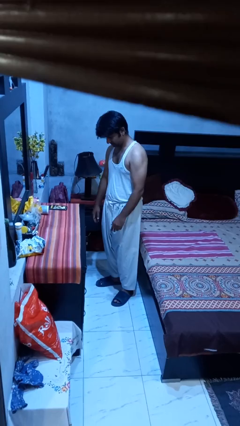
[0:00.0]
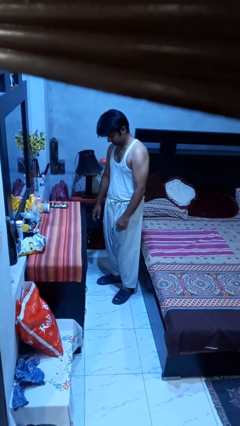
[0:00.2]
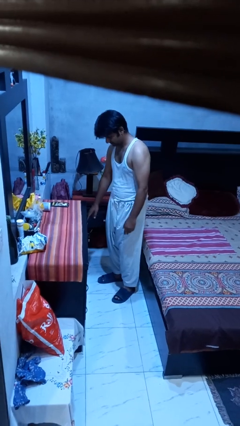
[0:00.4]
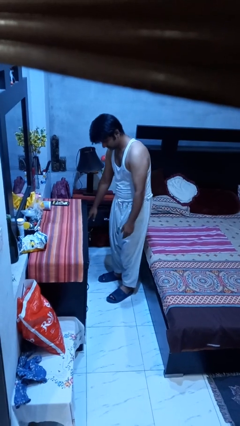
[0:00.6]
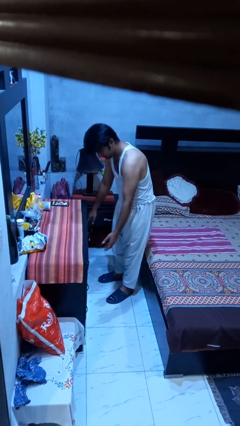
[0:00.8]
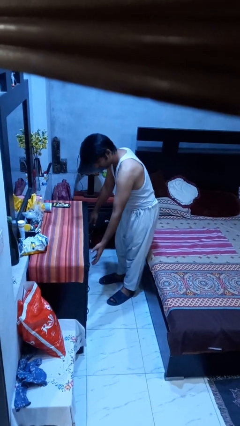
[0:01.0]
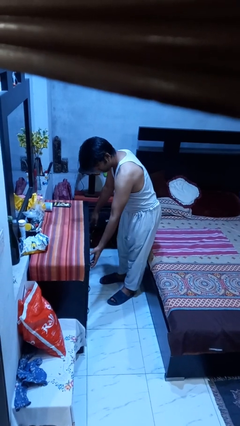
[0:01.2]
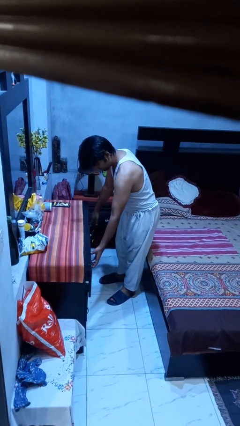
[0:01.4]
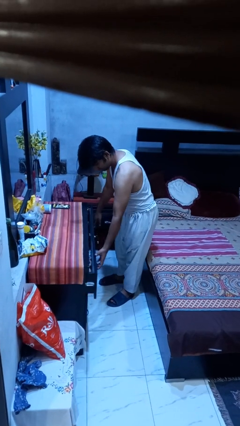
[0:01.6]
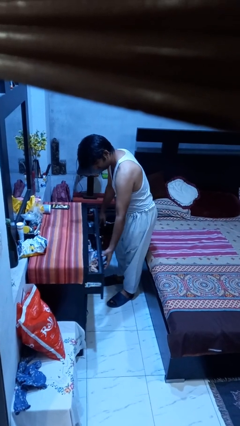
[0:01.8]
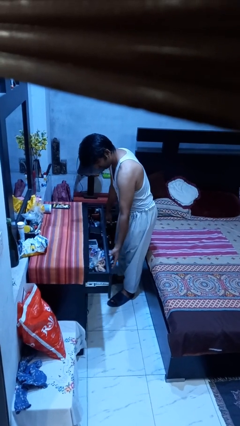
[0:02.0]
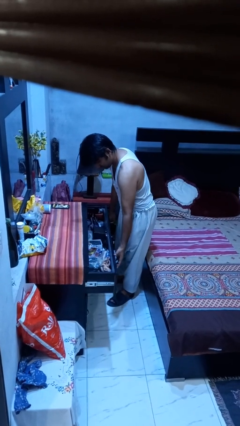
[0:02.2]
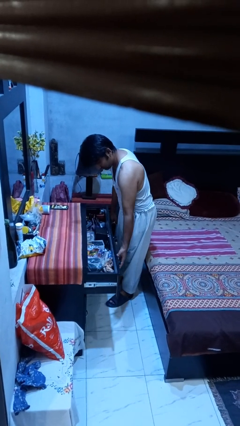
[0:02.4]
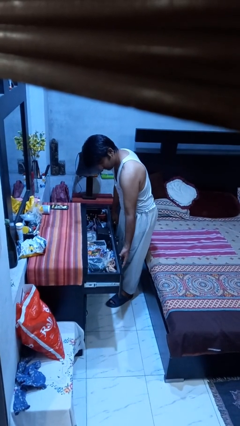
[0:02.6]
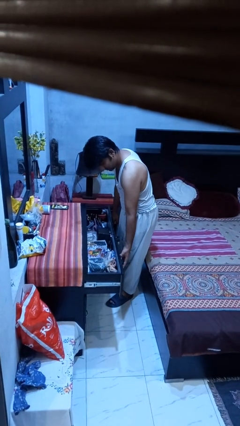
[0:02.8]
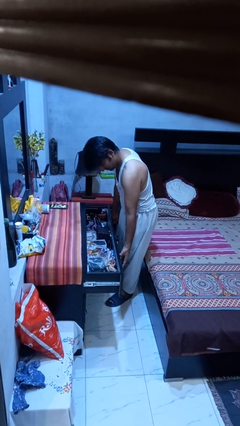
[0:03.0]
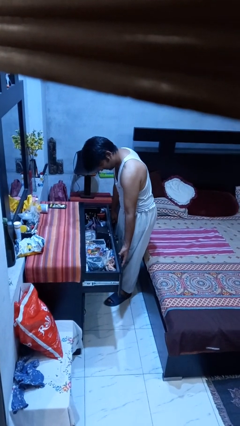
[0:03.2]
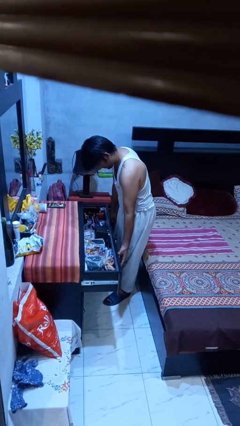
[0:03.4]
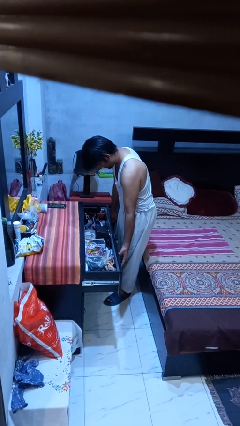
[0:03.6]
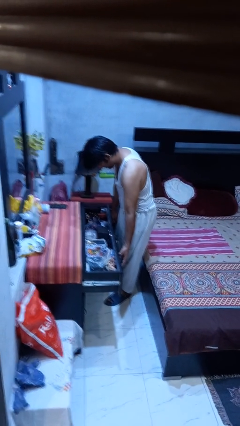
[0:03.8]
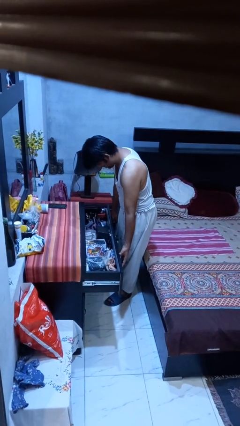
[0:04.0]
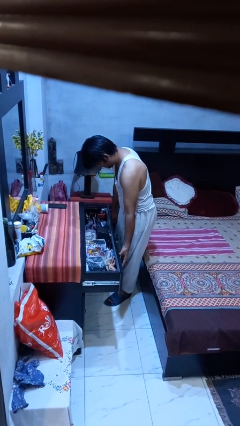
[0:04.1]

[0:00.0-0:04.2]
person opens dresser drawer

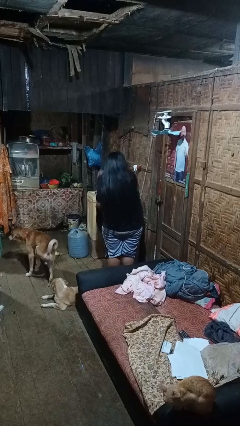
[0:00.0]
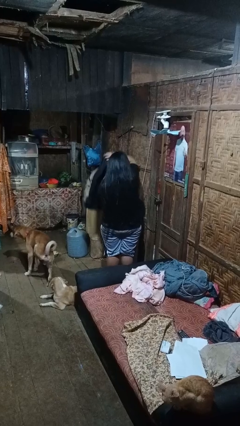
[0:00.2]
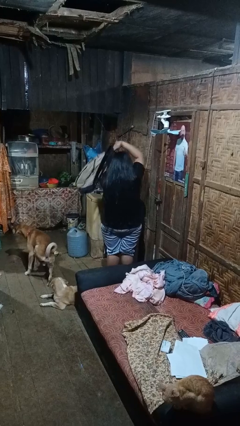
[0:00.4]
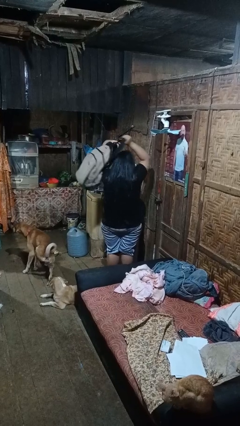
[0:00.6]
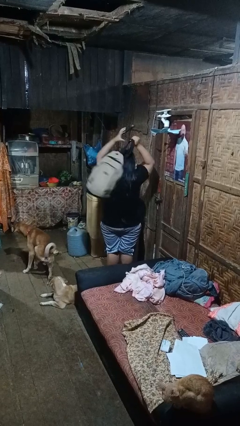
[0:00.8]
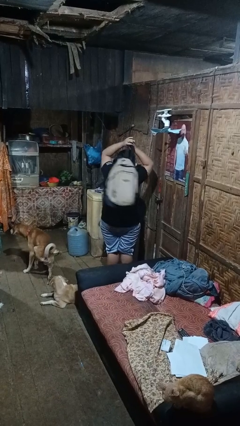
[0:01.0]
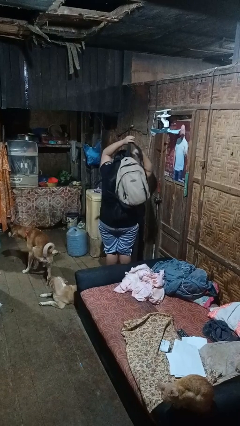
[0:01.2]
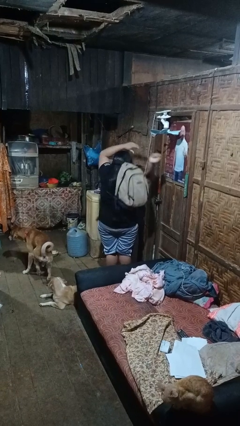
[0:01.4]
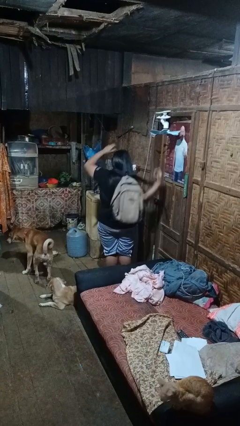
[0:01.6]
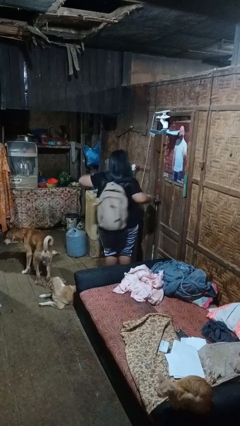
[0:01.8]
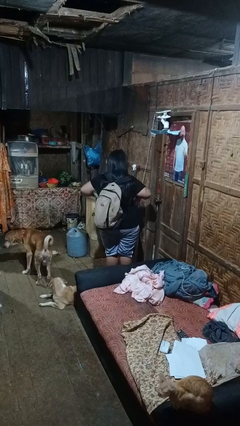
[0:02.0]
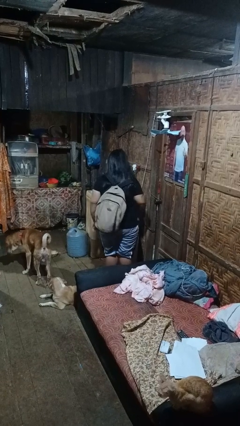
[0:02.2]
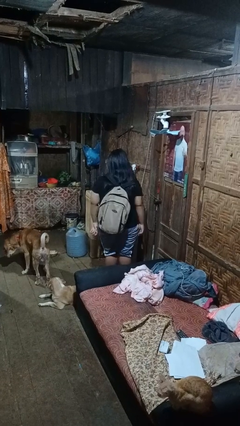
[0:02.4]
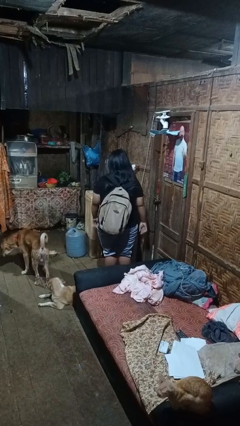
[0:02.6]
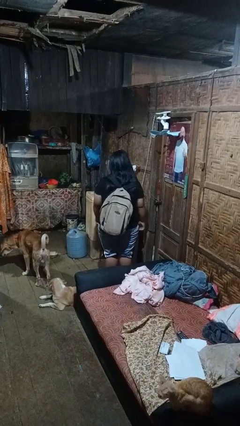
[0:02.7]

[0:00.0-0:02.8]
person puts on backpack

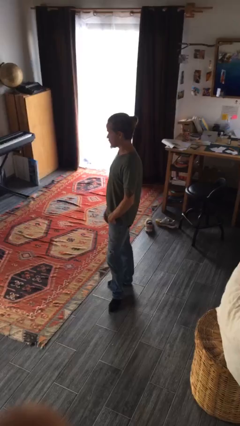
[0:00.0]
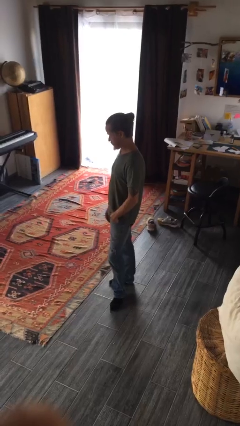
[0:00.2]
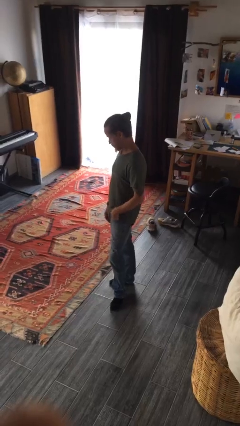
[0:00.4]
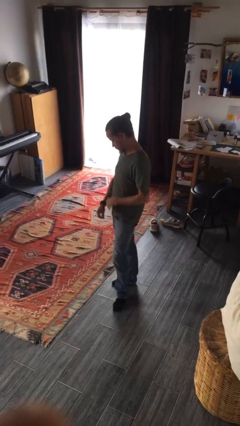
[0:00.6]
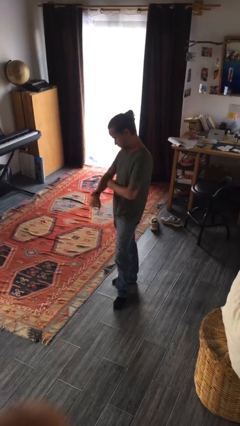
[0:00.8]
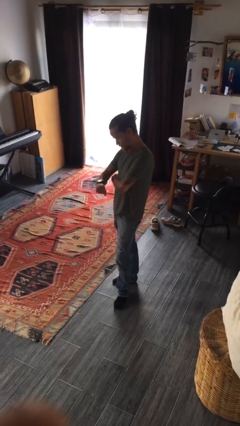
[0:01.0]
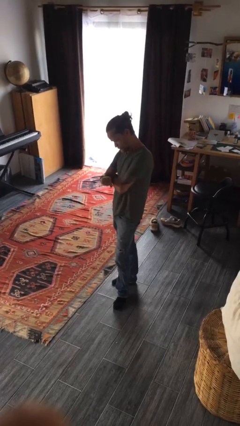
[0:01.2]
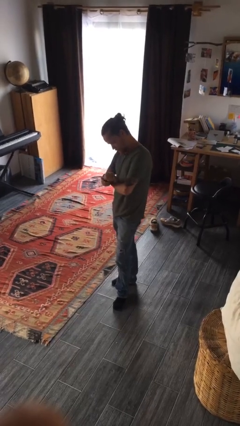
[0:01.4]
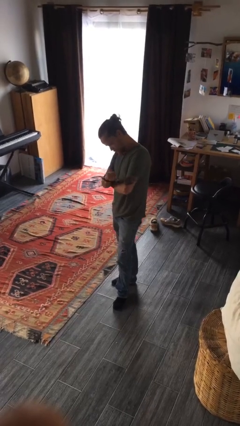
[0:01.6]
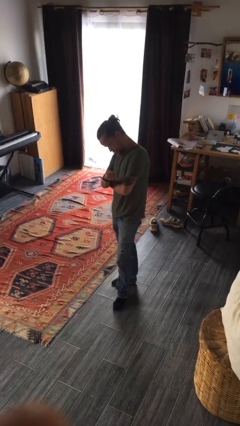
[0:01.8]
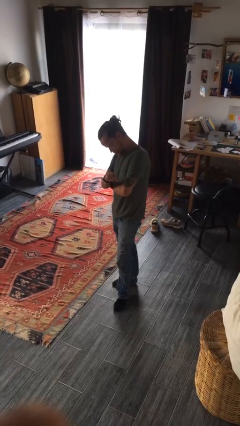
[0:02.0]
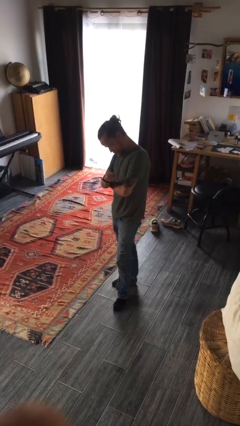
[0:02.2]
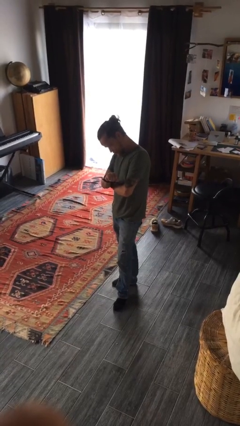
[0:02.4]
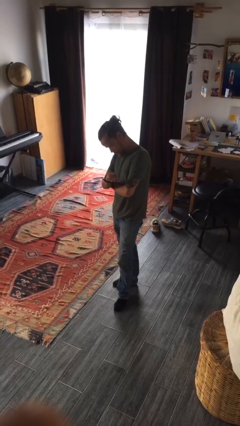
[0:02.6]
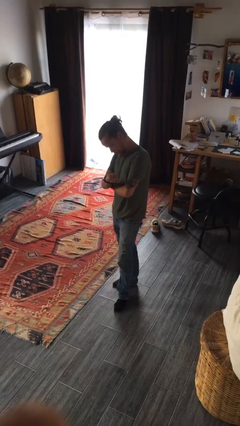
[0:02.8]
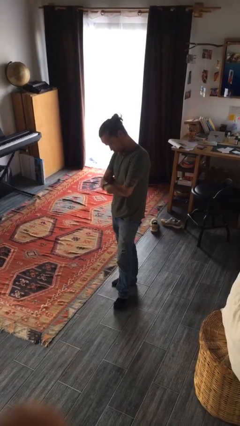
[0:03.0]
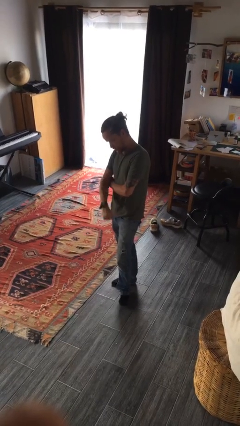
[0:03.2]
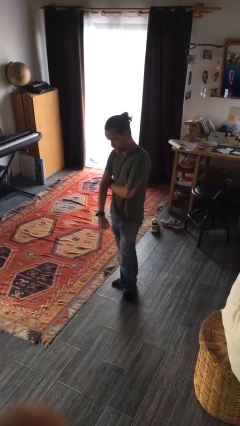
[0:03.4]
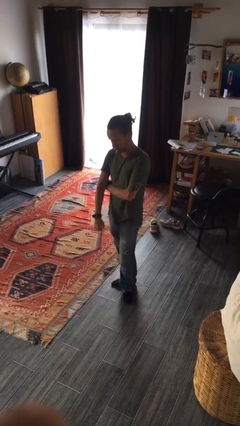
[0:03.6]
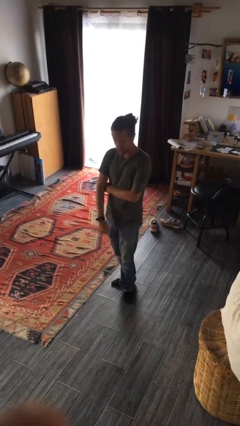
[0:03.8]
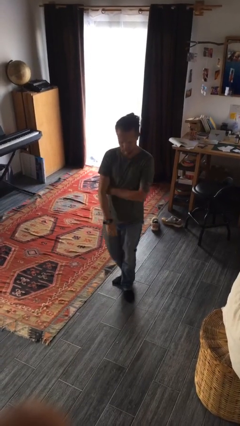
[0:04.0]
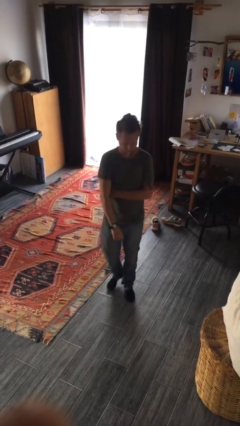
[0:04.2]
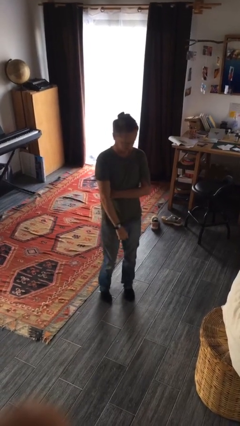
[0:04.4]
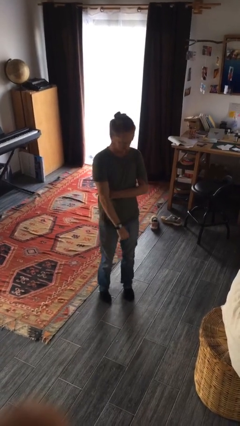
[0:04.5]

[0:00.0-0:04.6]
person looks at wristwatch

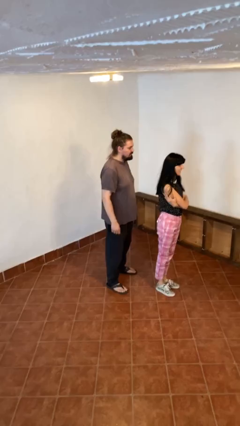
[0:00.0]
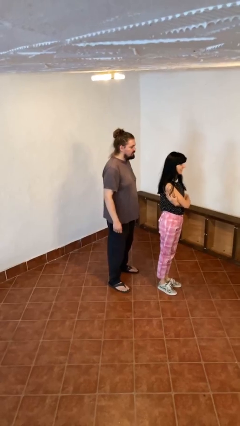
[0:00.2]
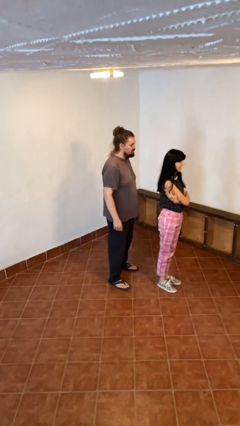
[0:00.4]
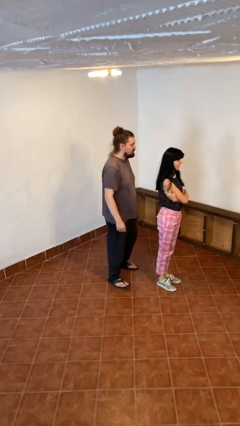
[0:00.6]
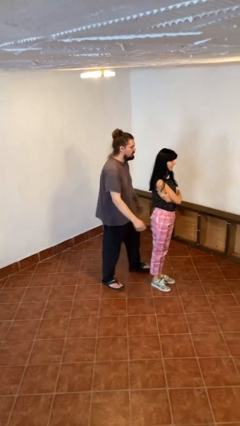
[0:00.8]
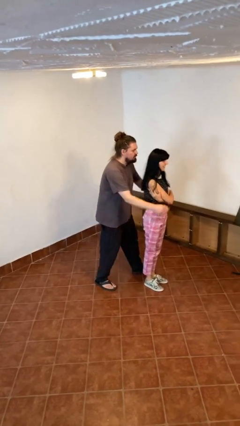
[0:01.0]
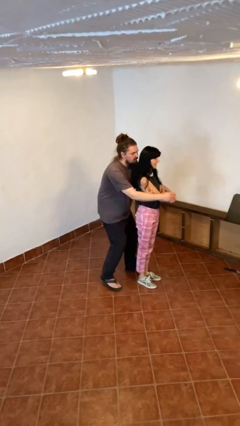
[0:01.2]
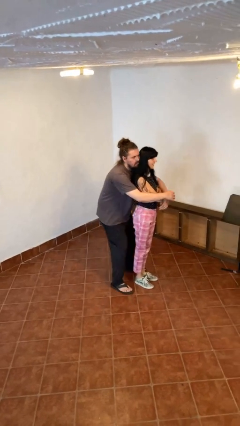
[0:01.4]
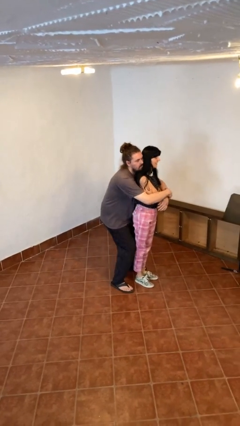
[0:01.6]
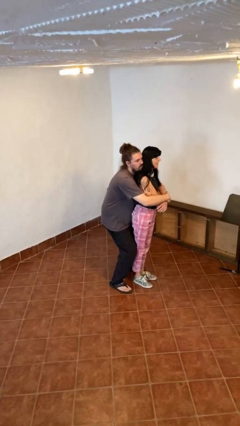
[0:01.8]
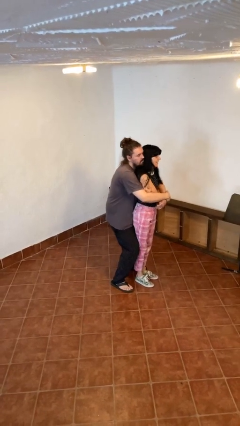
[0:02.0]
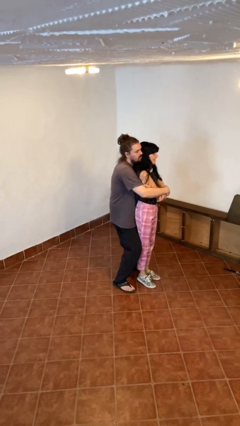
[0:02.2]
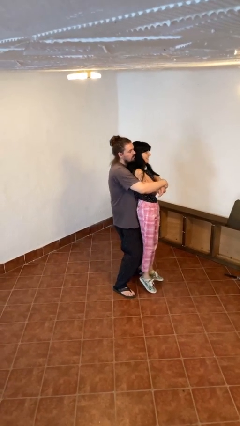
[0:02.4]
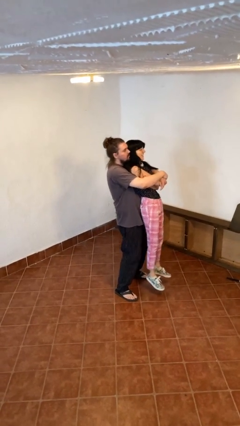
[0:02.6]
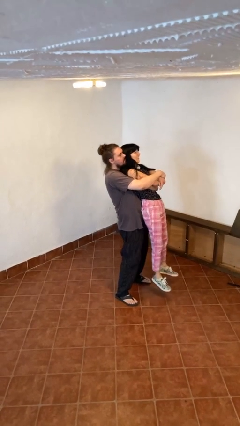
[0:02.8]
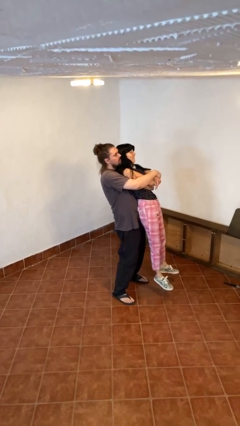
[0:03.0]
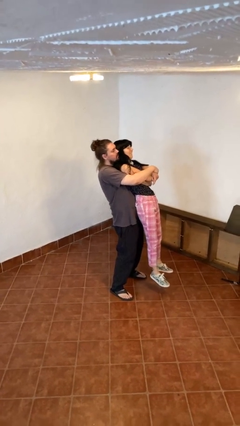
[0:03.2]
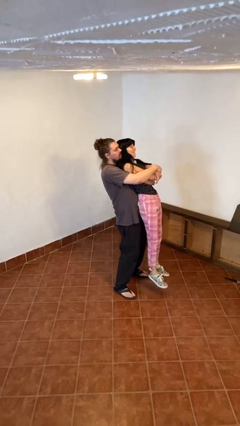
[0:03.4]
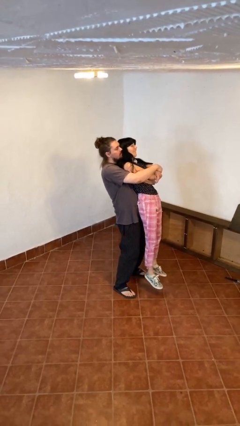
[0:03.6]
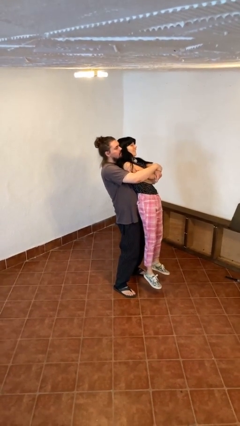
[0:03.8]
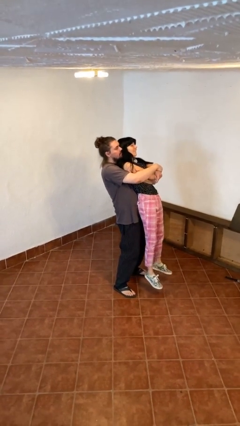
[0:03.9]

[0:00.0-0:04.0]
person picks up person

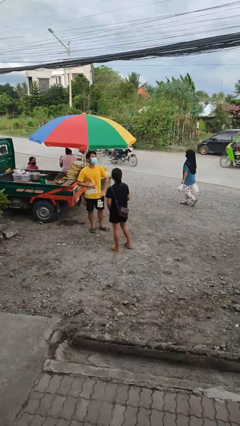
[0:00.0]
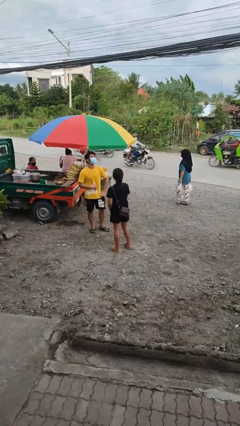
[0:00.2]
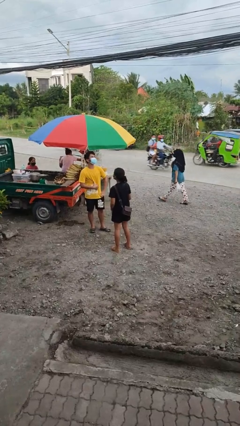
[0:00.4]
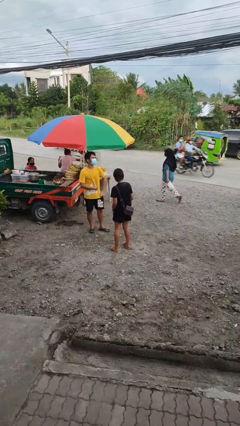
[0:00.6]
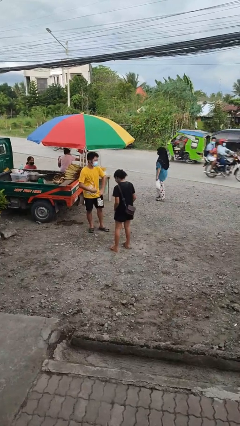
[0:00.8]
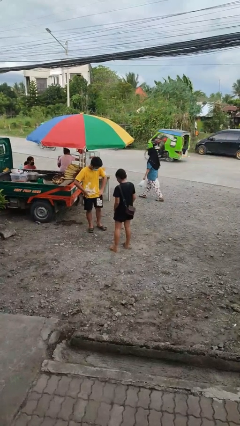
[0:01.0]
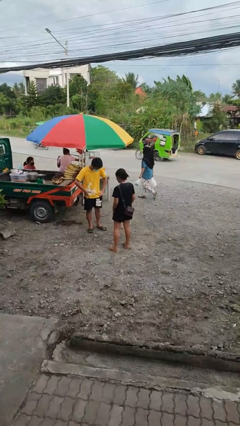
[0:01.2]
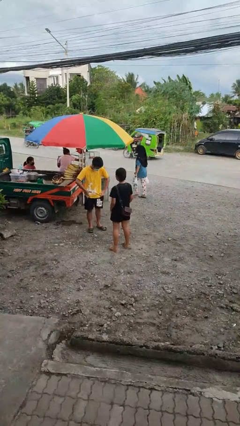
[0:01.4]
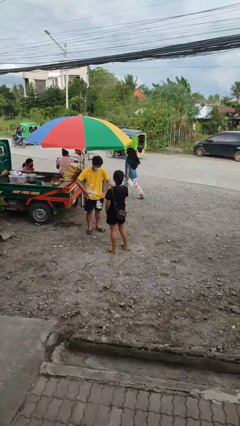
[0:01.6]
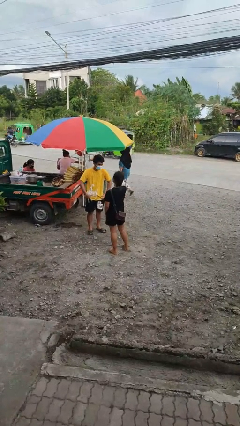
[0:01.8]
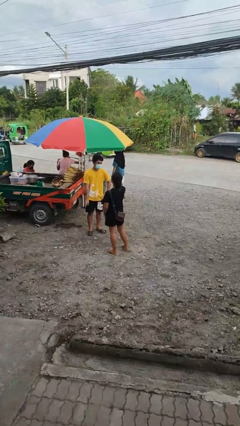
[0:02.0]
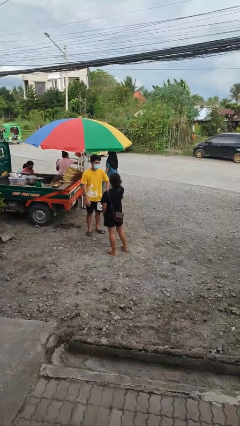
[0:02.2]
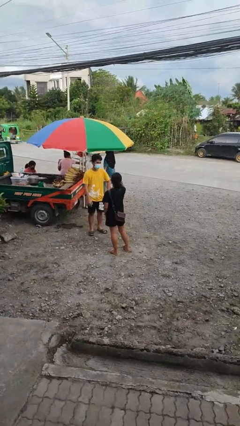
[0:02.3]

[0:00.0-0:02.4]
person laughs with person
